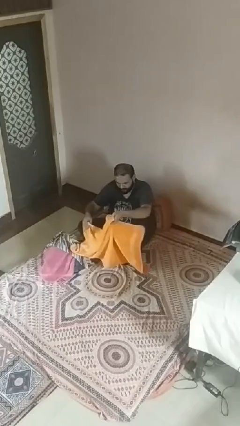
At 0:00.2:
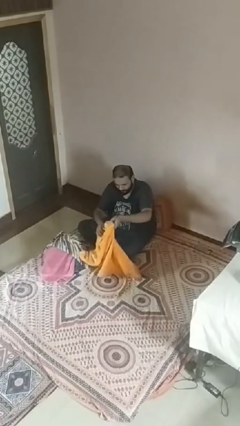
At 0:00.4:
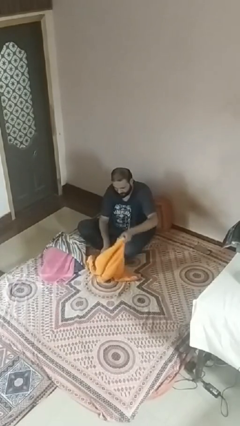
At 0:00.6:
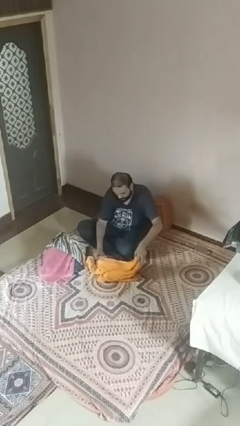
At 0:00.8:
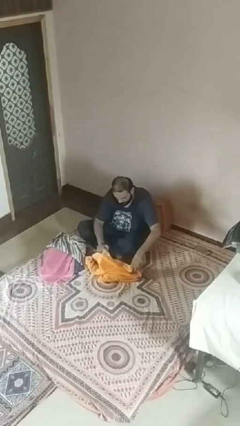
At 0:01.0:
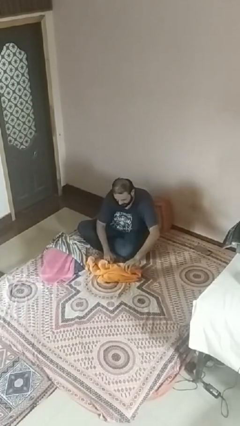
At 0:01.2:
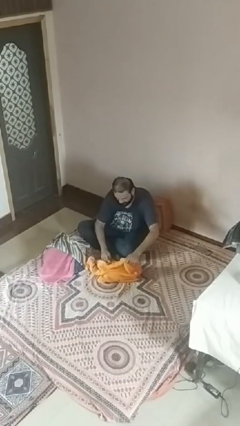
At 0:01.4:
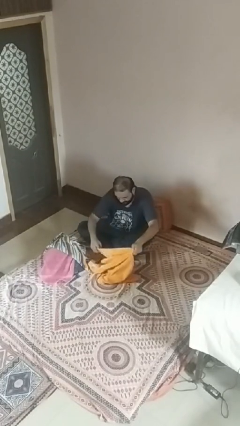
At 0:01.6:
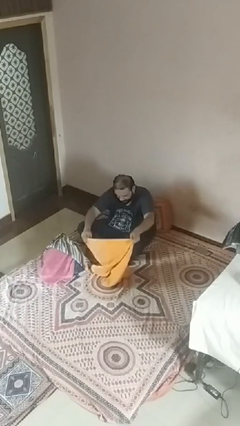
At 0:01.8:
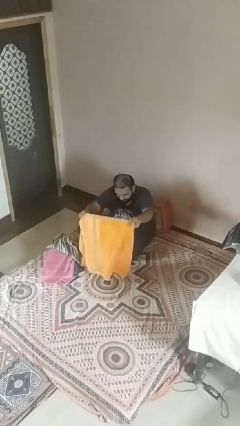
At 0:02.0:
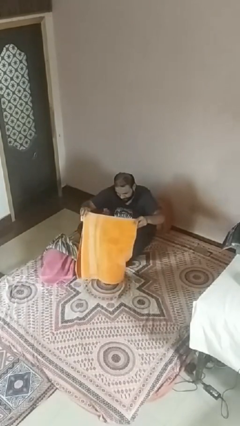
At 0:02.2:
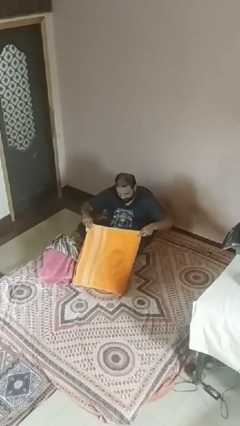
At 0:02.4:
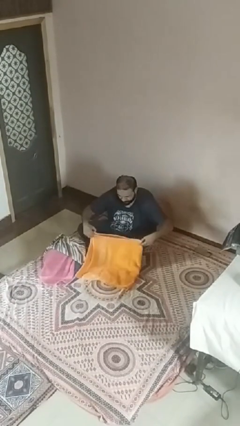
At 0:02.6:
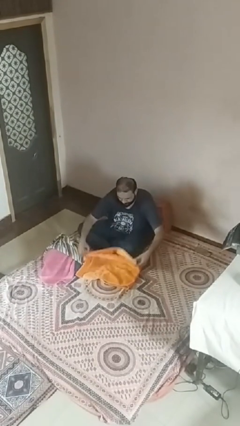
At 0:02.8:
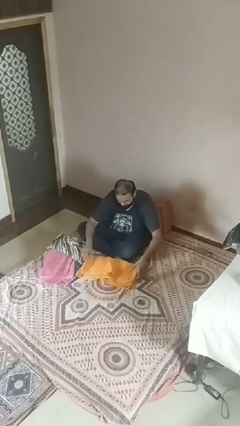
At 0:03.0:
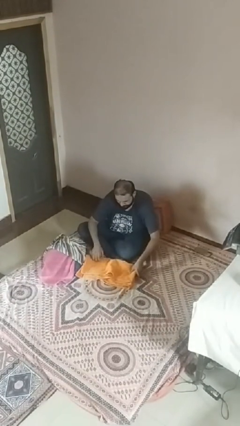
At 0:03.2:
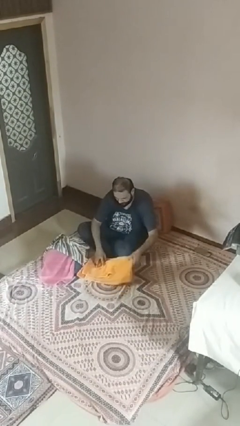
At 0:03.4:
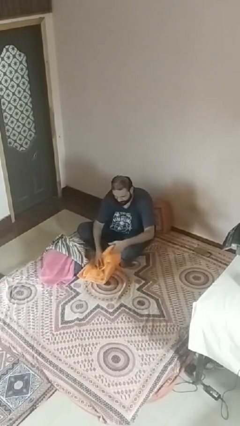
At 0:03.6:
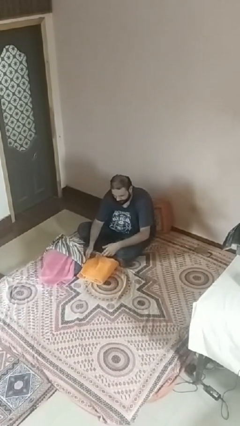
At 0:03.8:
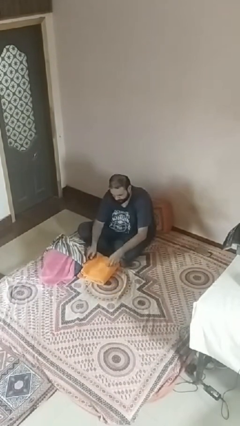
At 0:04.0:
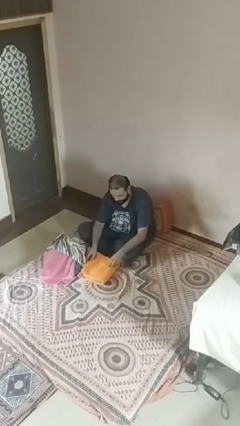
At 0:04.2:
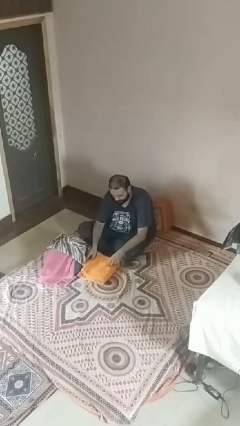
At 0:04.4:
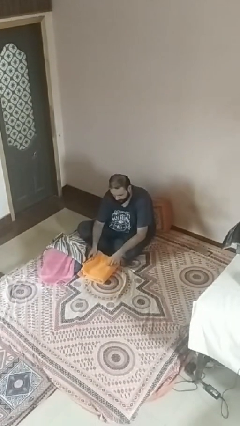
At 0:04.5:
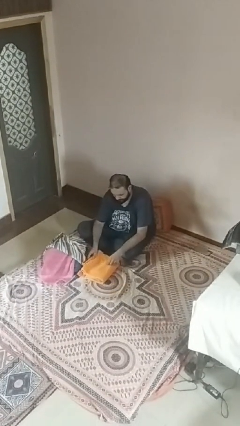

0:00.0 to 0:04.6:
person folds towel

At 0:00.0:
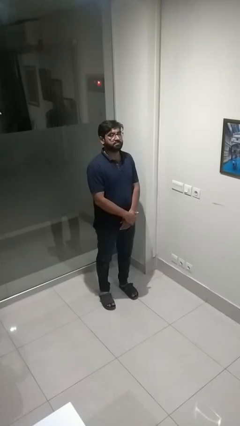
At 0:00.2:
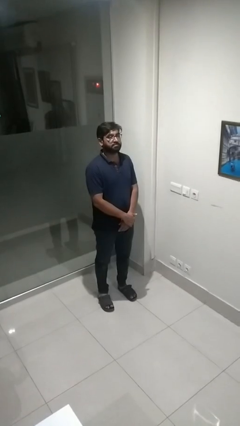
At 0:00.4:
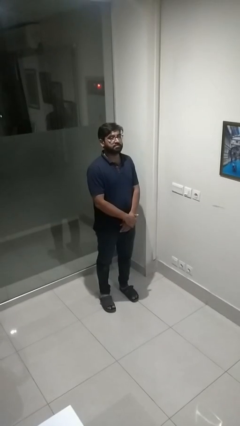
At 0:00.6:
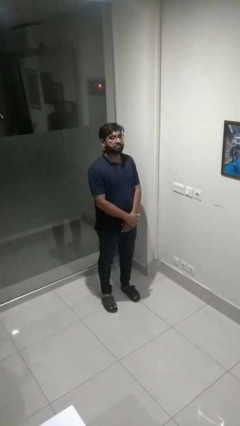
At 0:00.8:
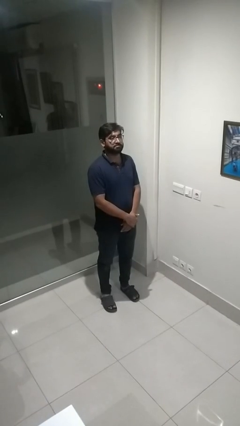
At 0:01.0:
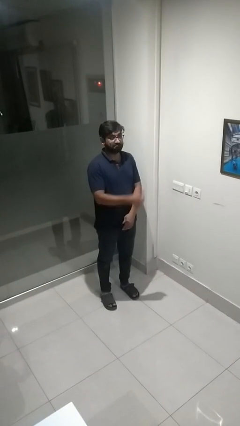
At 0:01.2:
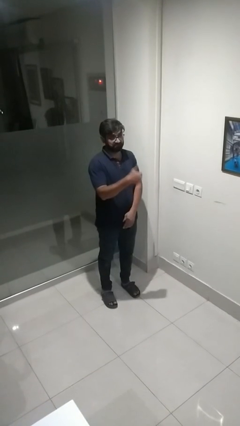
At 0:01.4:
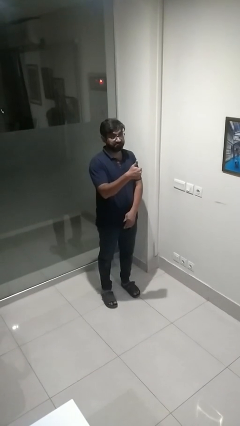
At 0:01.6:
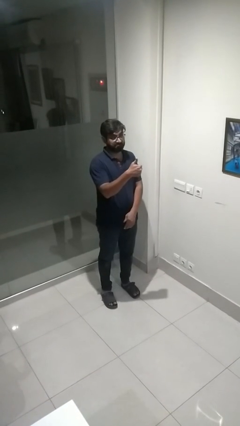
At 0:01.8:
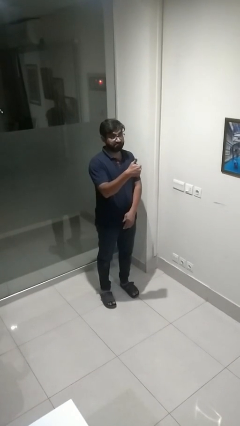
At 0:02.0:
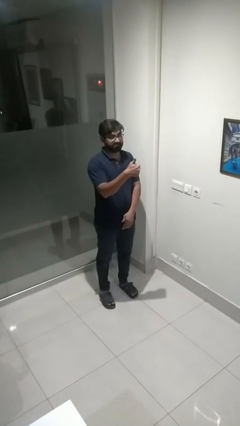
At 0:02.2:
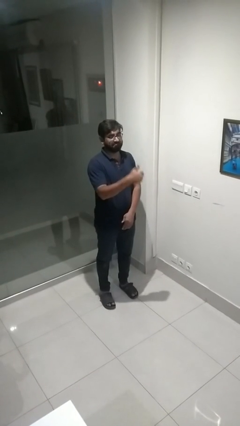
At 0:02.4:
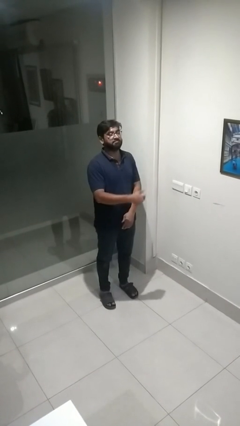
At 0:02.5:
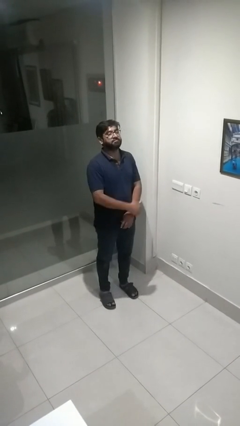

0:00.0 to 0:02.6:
person gestures thumbs up

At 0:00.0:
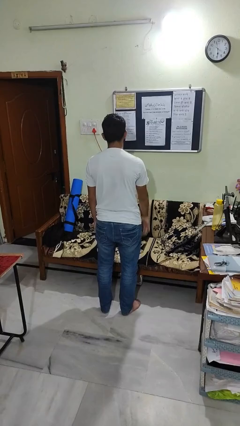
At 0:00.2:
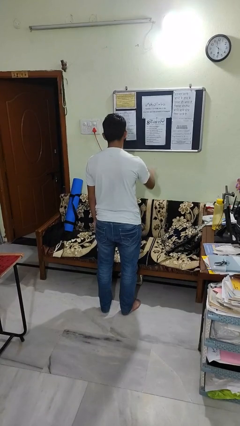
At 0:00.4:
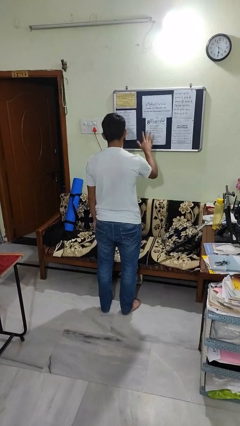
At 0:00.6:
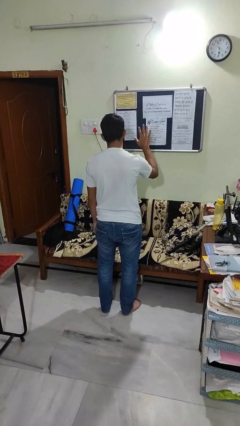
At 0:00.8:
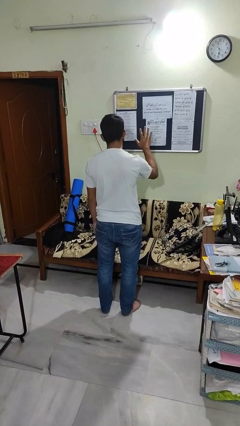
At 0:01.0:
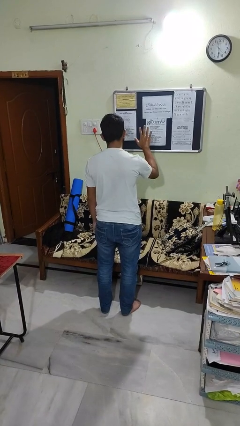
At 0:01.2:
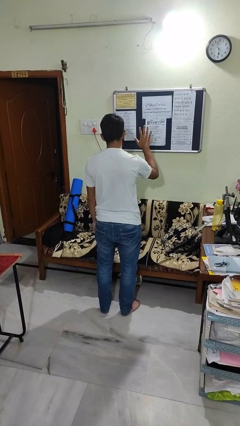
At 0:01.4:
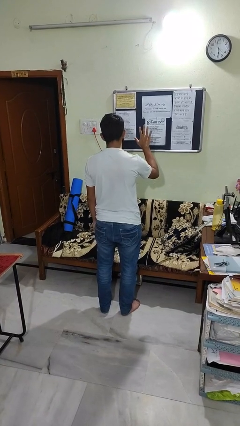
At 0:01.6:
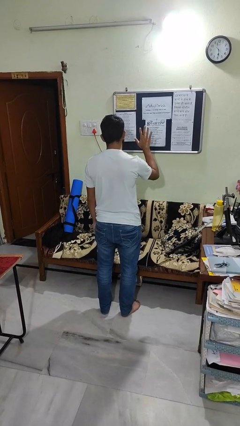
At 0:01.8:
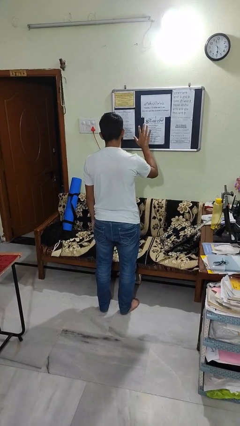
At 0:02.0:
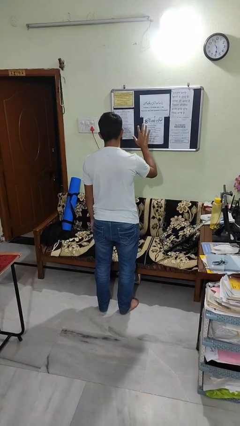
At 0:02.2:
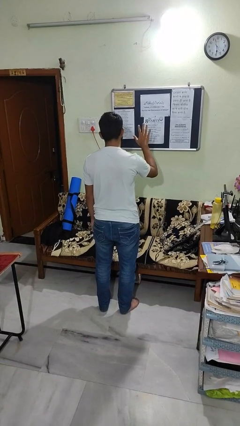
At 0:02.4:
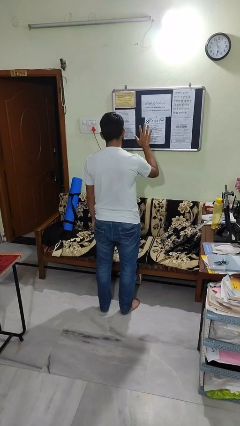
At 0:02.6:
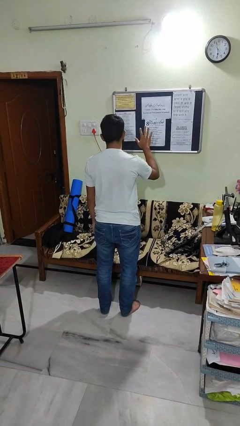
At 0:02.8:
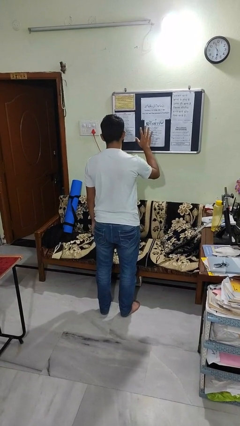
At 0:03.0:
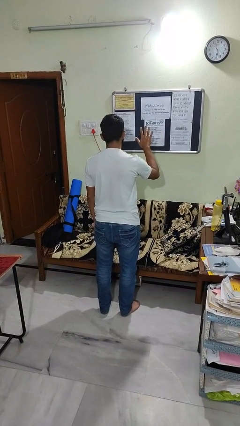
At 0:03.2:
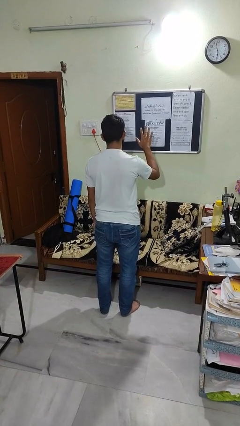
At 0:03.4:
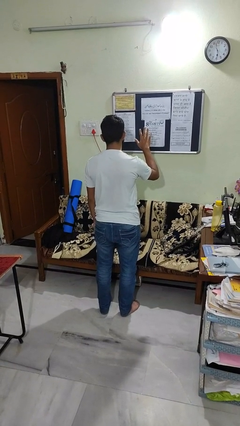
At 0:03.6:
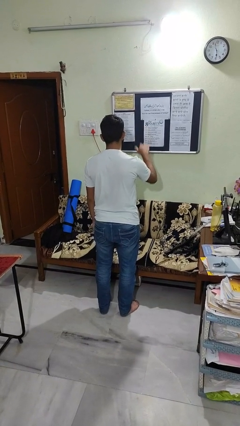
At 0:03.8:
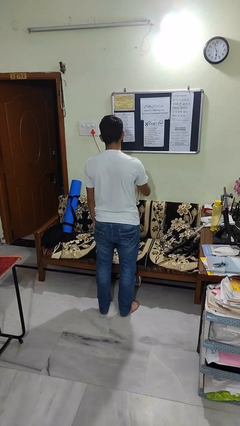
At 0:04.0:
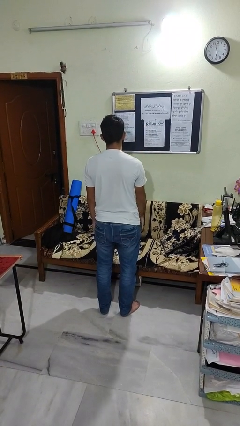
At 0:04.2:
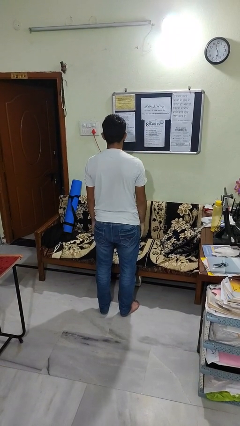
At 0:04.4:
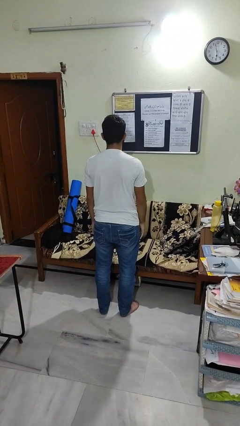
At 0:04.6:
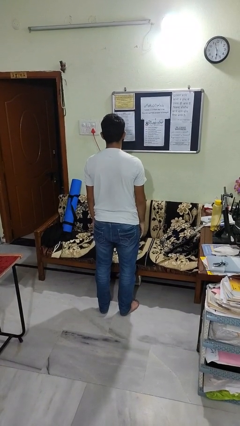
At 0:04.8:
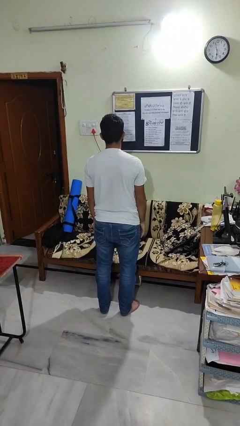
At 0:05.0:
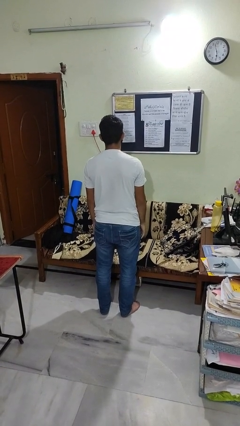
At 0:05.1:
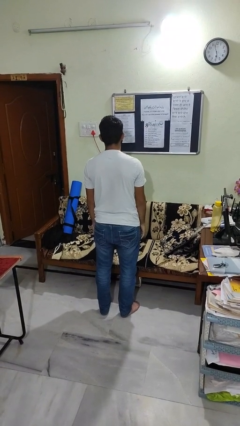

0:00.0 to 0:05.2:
person gestures number five

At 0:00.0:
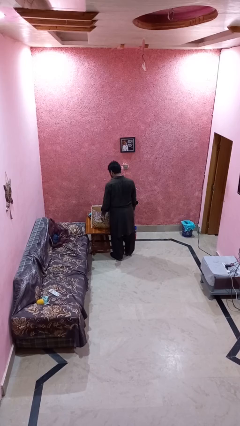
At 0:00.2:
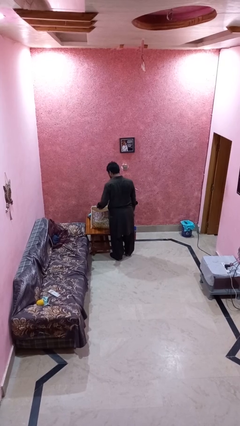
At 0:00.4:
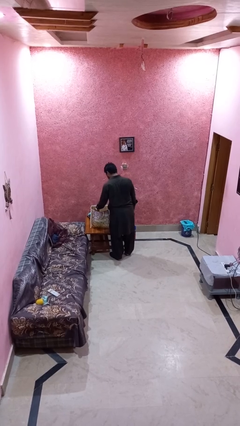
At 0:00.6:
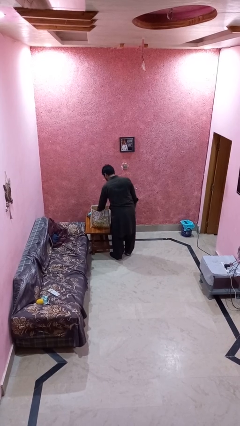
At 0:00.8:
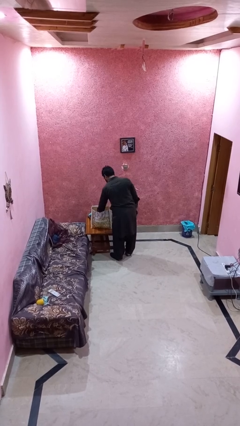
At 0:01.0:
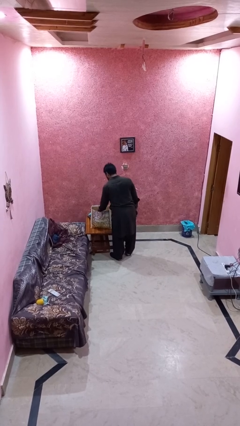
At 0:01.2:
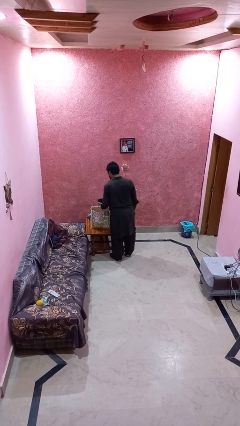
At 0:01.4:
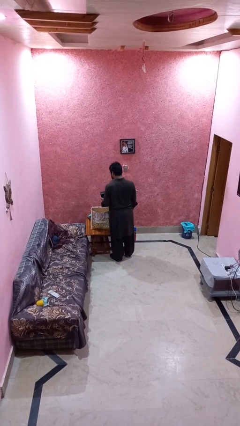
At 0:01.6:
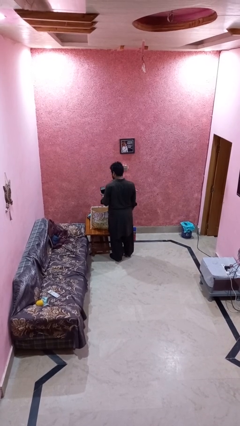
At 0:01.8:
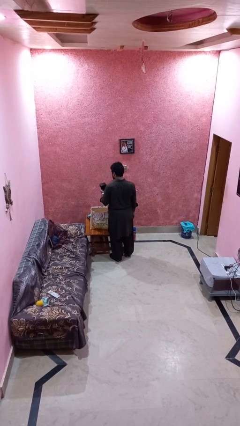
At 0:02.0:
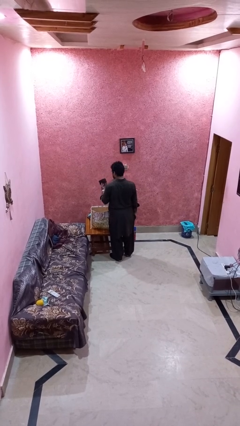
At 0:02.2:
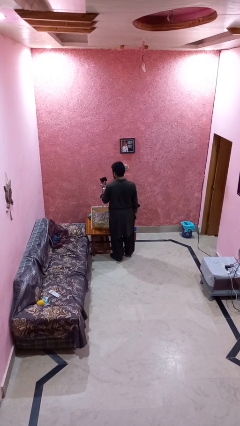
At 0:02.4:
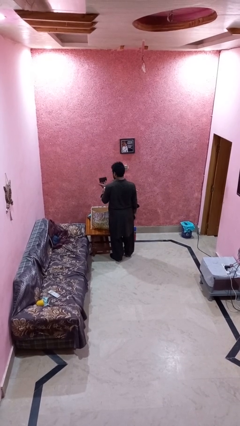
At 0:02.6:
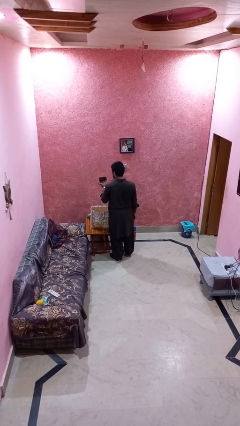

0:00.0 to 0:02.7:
person takes object from bag

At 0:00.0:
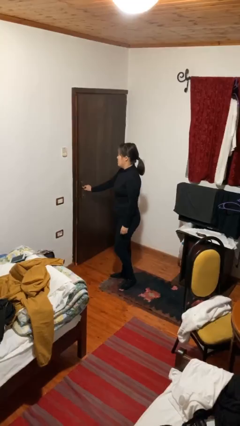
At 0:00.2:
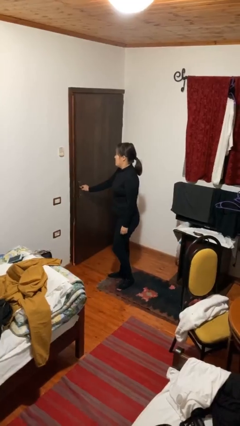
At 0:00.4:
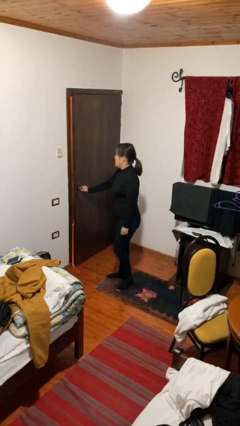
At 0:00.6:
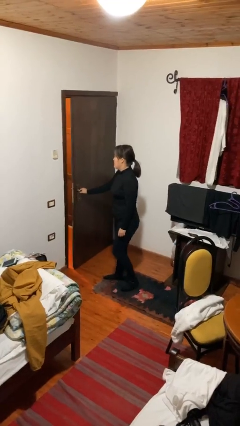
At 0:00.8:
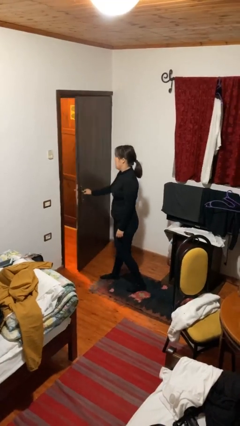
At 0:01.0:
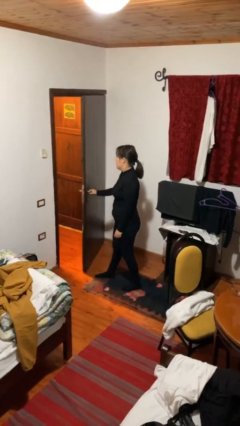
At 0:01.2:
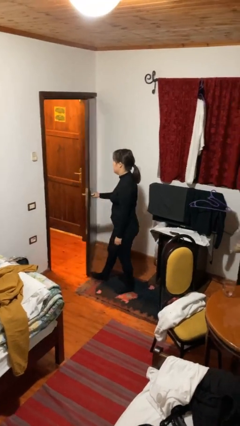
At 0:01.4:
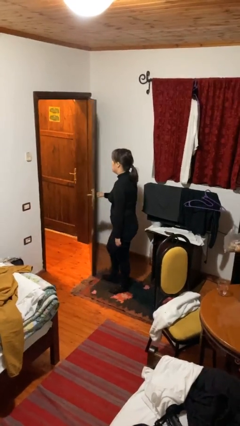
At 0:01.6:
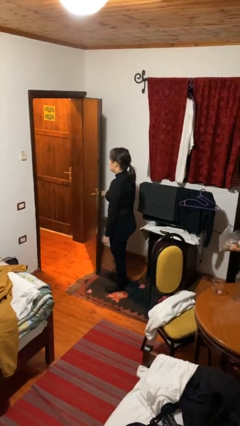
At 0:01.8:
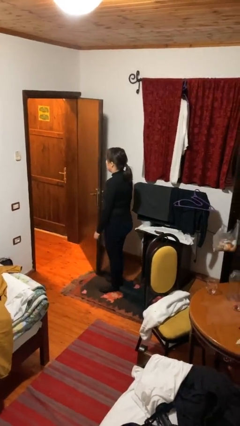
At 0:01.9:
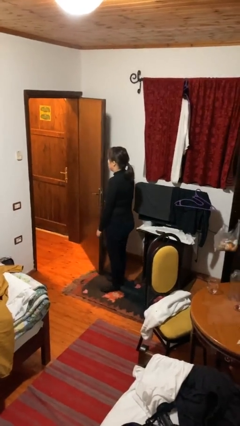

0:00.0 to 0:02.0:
person opens facility door

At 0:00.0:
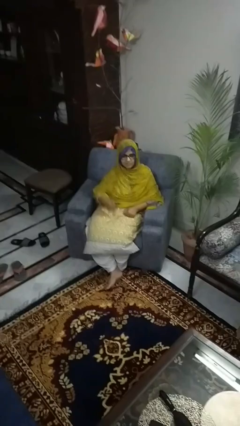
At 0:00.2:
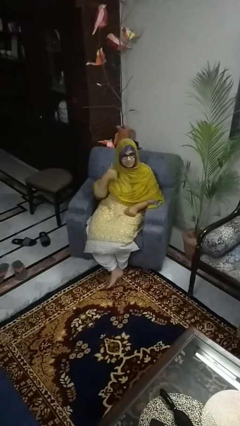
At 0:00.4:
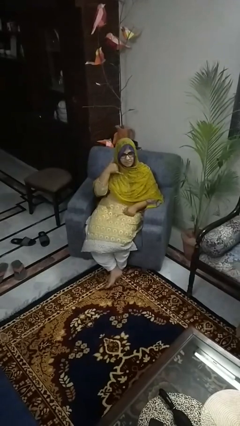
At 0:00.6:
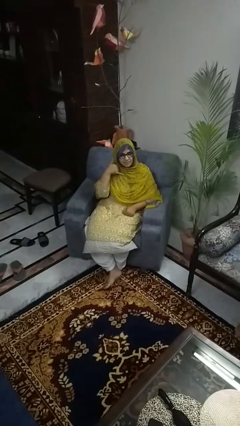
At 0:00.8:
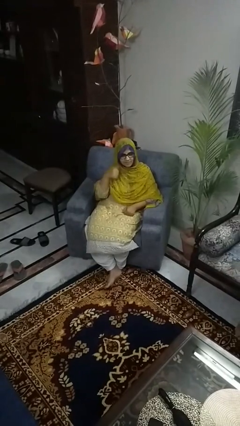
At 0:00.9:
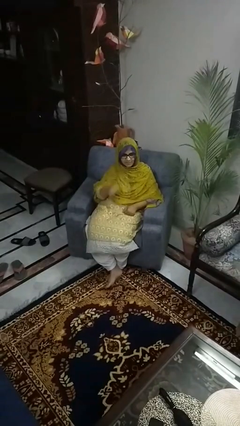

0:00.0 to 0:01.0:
person gestures call me
